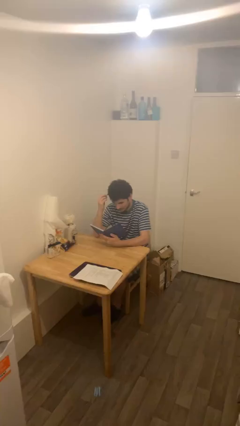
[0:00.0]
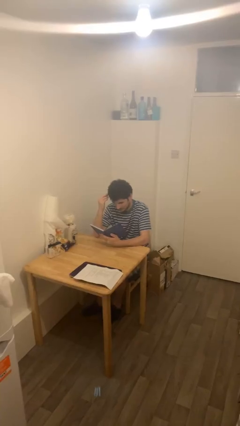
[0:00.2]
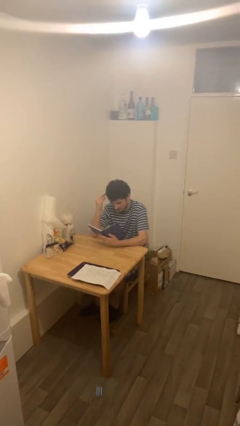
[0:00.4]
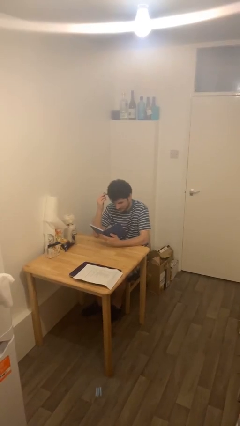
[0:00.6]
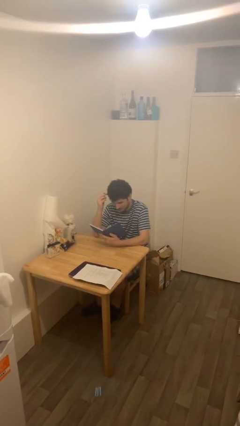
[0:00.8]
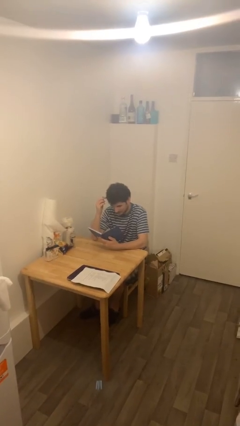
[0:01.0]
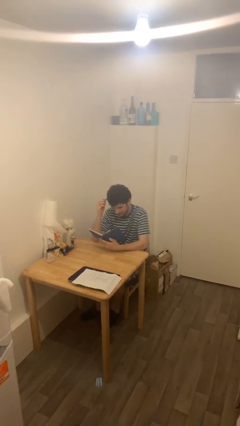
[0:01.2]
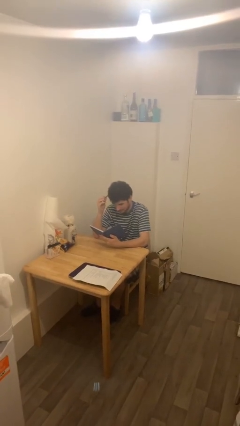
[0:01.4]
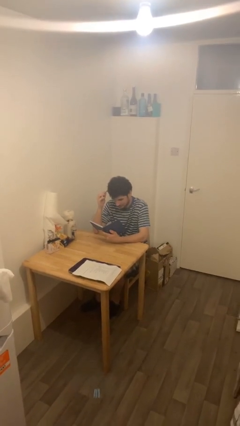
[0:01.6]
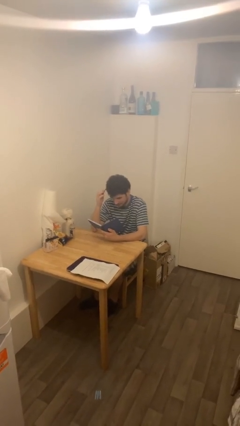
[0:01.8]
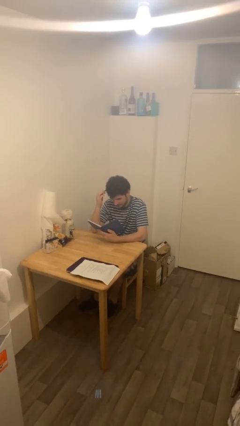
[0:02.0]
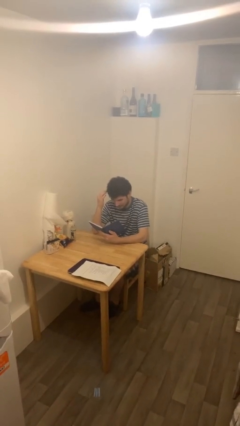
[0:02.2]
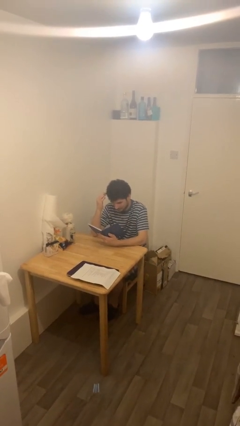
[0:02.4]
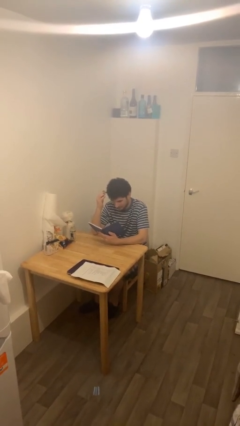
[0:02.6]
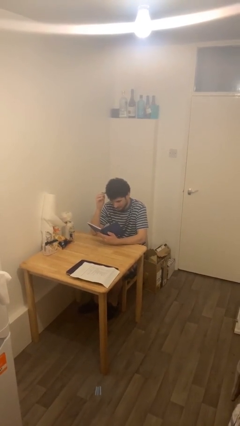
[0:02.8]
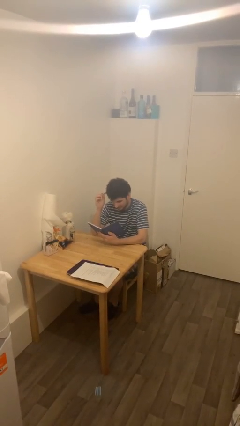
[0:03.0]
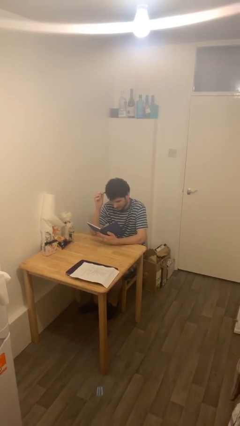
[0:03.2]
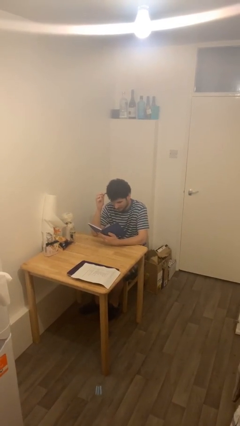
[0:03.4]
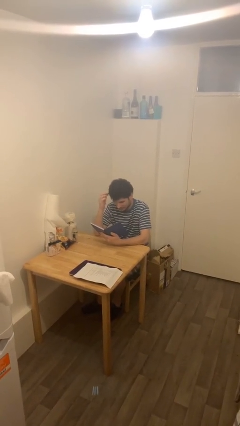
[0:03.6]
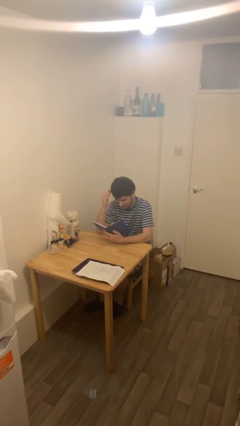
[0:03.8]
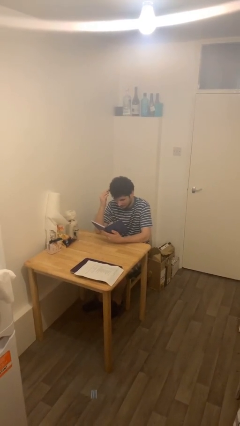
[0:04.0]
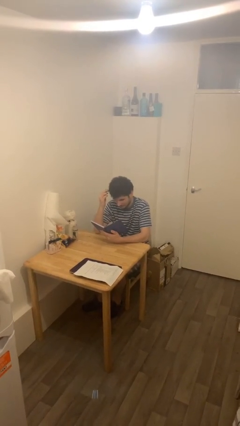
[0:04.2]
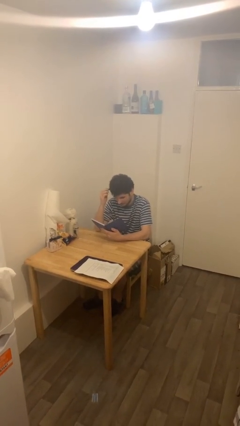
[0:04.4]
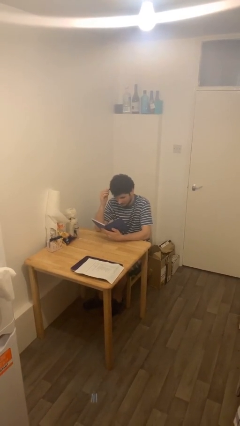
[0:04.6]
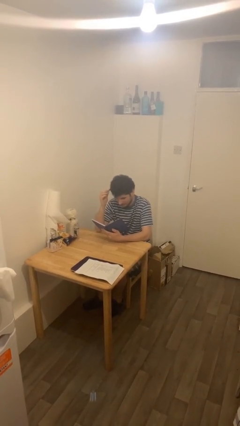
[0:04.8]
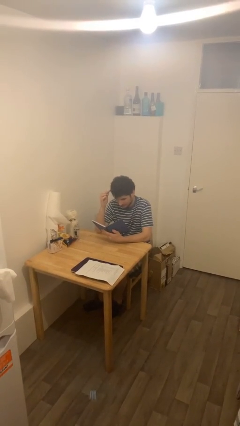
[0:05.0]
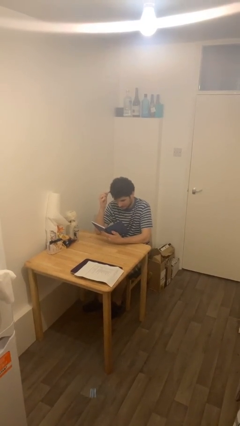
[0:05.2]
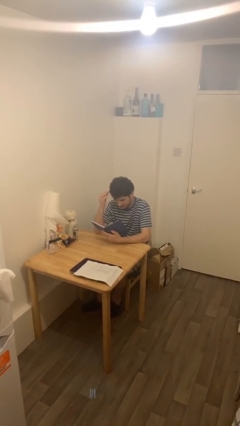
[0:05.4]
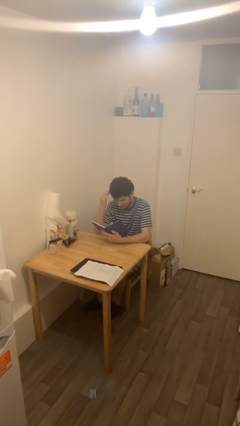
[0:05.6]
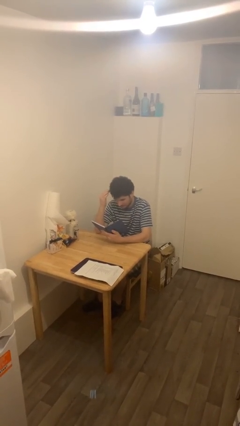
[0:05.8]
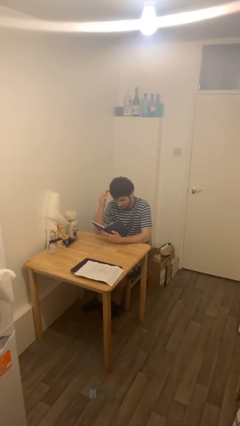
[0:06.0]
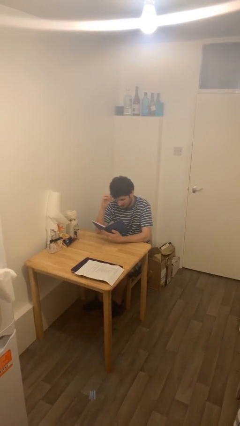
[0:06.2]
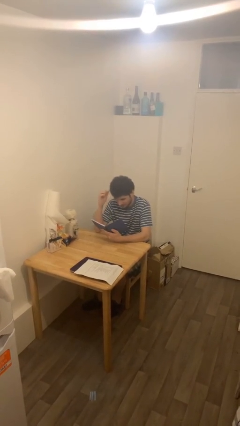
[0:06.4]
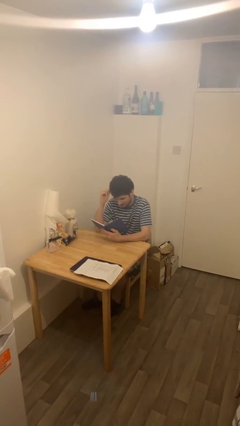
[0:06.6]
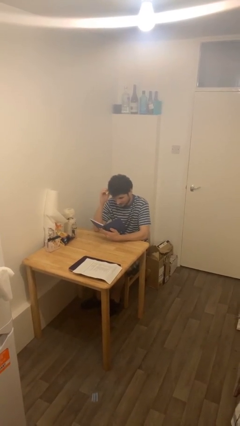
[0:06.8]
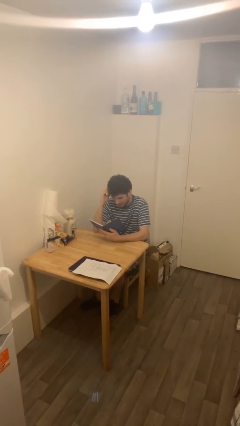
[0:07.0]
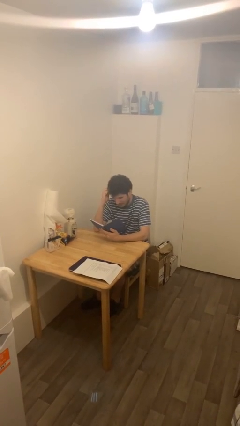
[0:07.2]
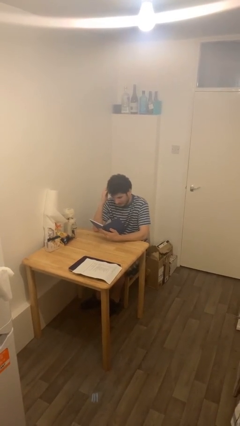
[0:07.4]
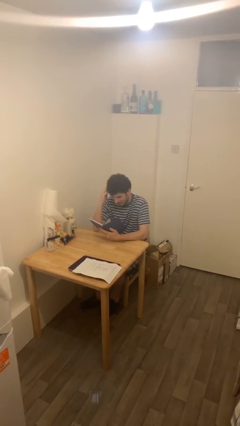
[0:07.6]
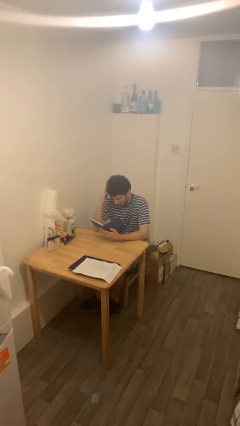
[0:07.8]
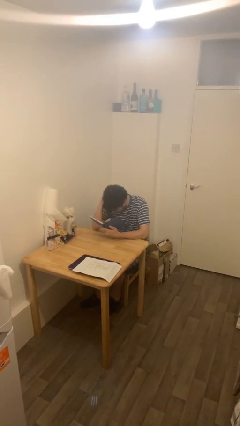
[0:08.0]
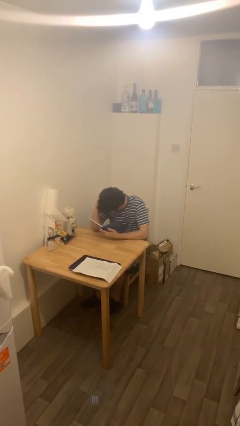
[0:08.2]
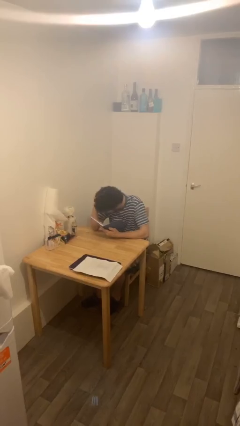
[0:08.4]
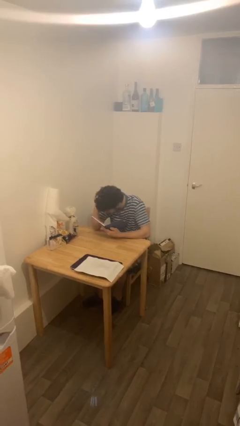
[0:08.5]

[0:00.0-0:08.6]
person reads document

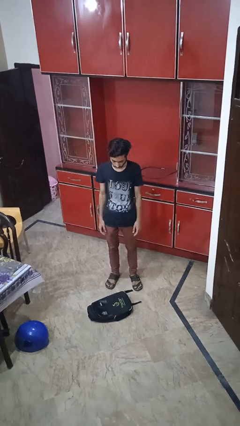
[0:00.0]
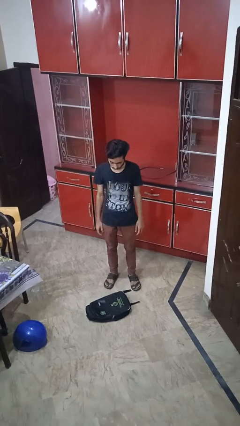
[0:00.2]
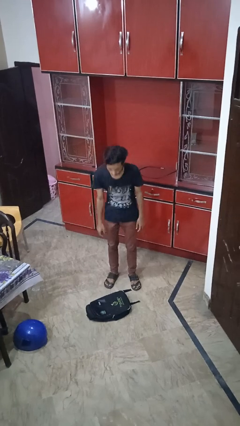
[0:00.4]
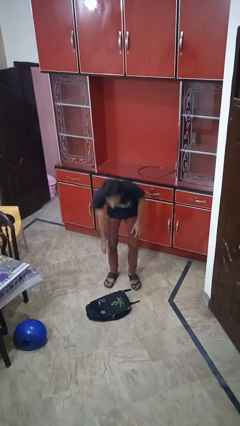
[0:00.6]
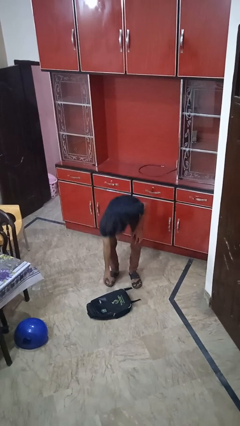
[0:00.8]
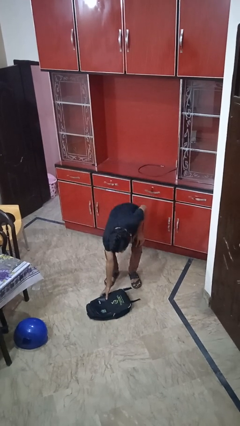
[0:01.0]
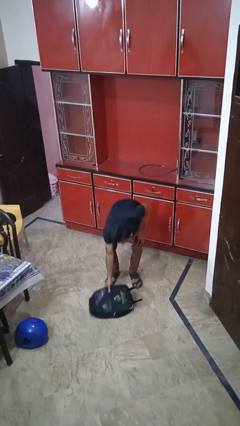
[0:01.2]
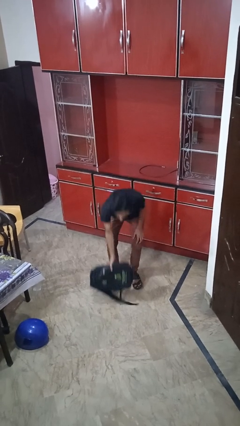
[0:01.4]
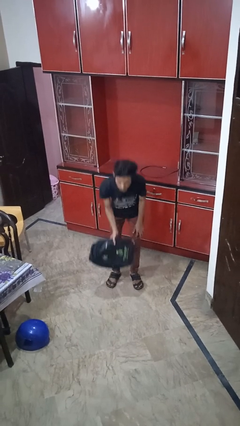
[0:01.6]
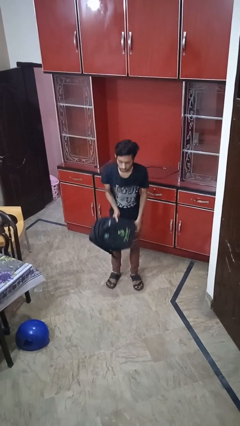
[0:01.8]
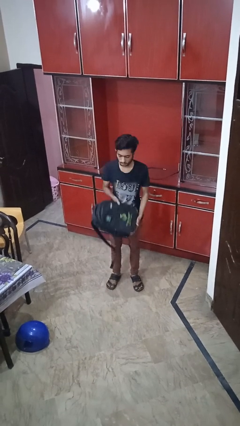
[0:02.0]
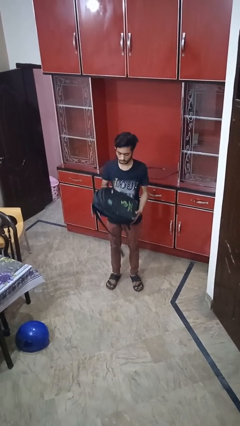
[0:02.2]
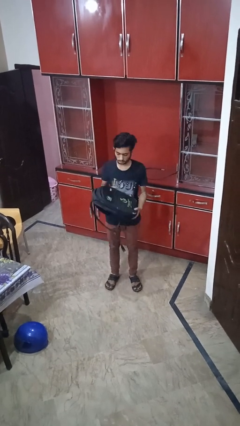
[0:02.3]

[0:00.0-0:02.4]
person picks up object from floor

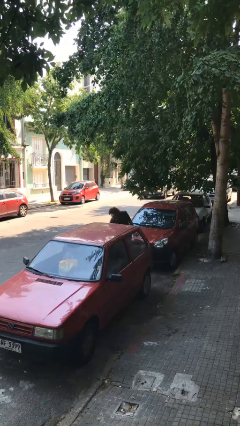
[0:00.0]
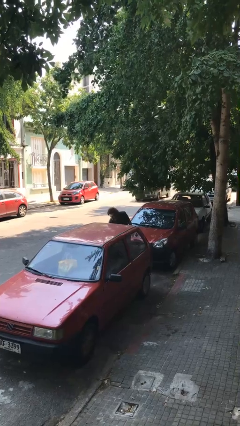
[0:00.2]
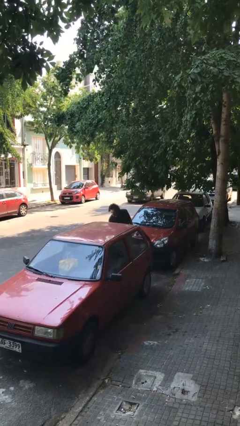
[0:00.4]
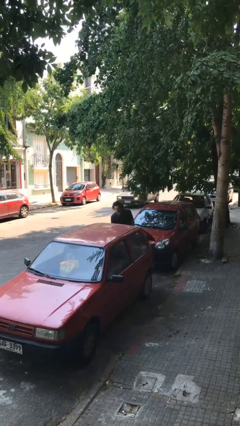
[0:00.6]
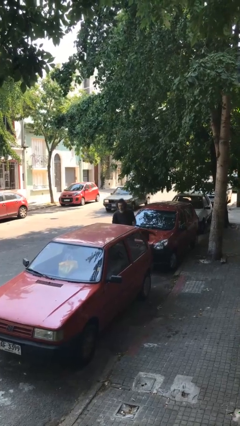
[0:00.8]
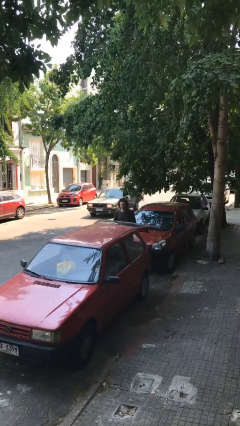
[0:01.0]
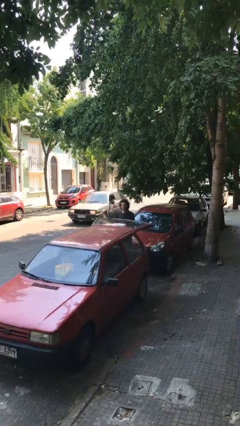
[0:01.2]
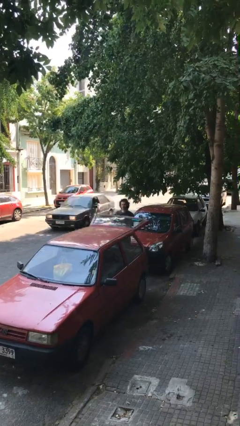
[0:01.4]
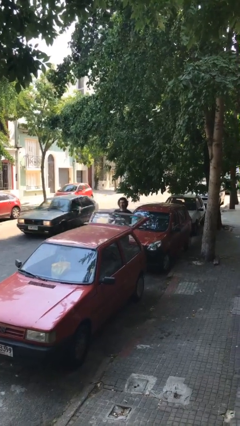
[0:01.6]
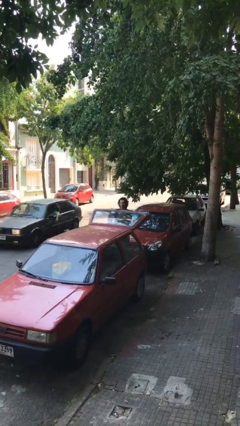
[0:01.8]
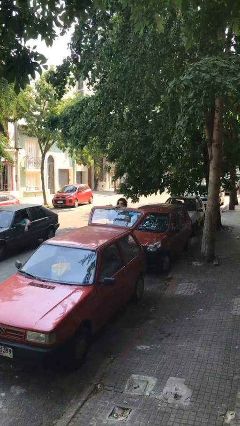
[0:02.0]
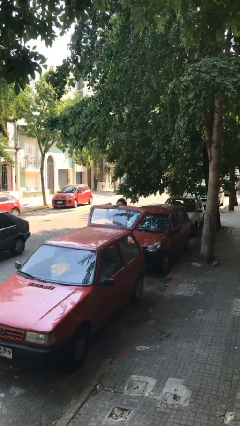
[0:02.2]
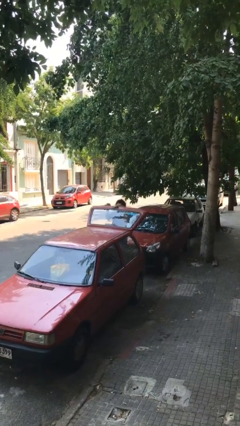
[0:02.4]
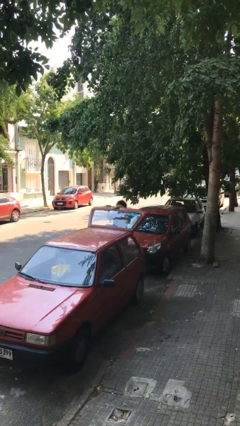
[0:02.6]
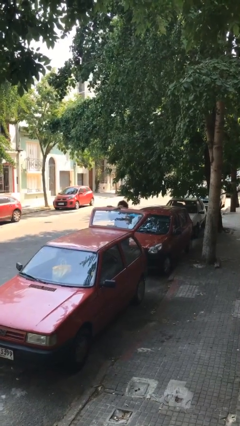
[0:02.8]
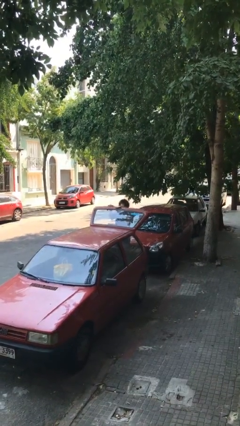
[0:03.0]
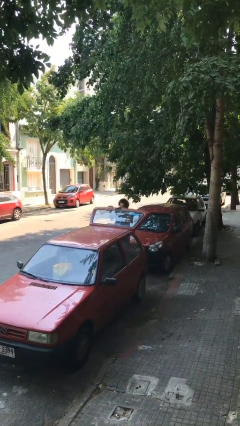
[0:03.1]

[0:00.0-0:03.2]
person opens car trunk

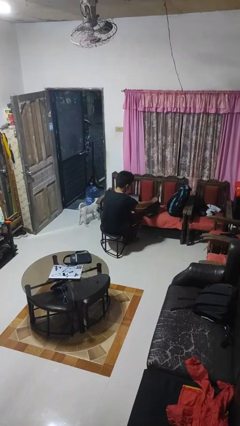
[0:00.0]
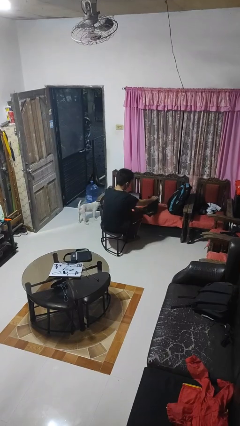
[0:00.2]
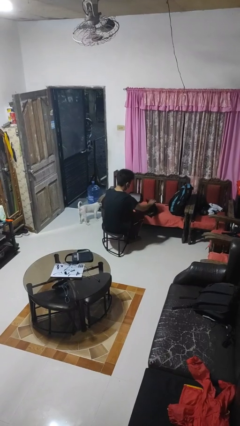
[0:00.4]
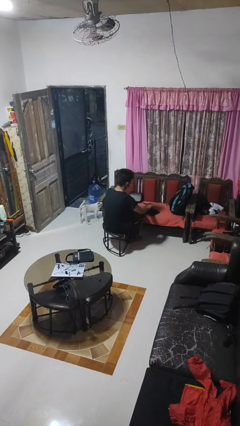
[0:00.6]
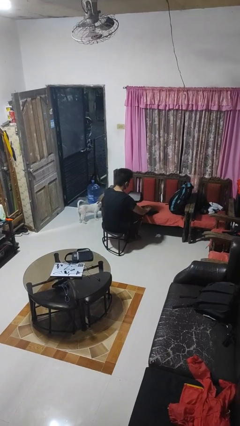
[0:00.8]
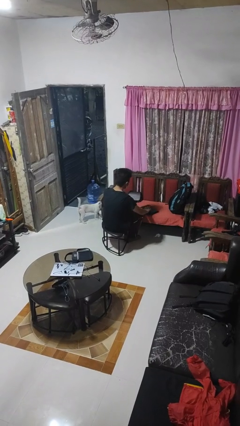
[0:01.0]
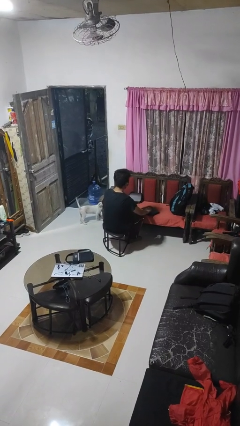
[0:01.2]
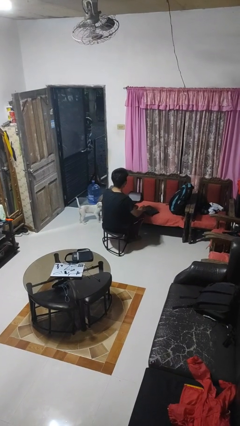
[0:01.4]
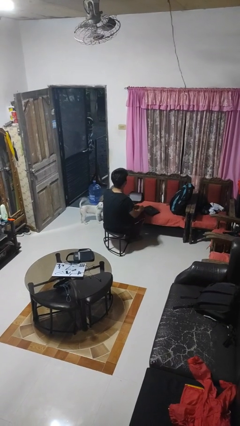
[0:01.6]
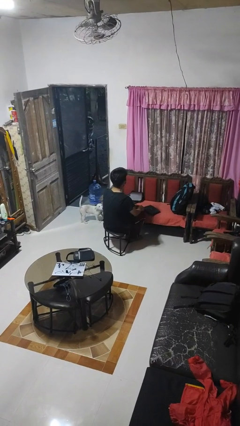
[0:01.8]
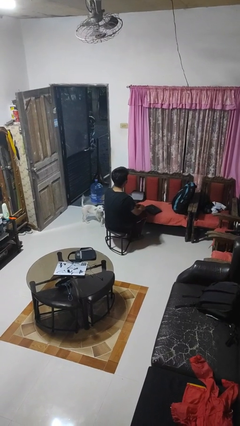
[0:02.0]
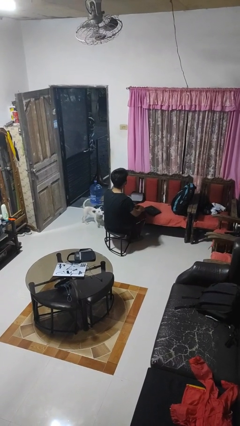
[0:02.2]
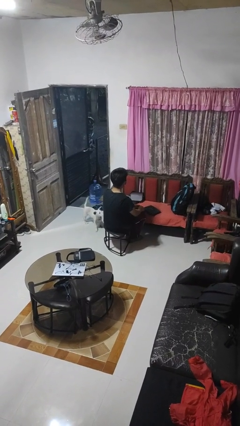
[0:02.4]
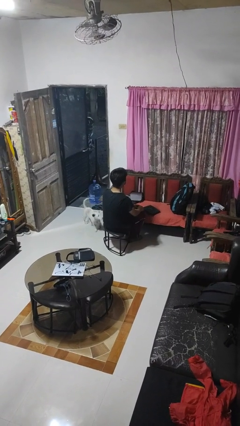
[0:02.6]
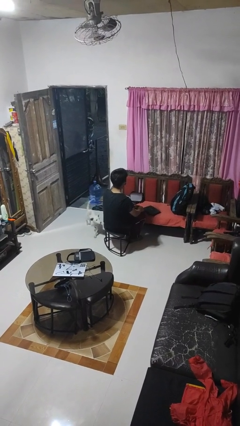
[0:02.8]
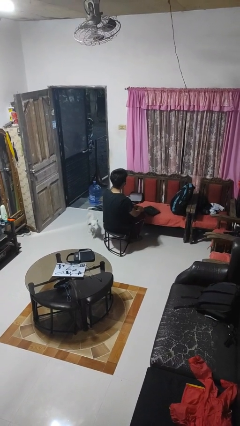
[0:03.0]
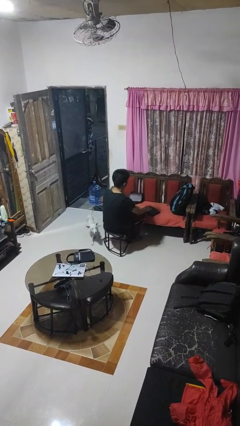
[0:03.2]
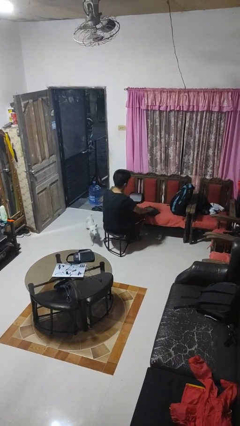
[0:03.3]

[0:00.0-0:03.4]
person closes laptop
